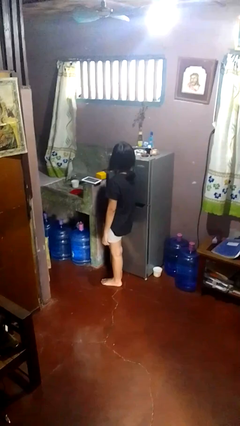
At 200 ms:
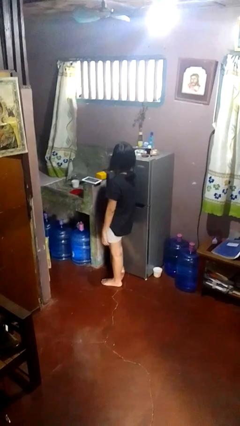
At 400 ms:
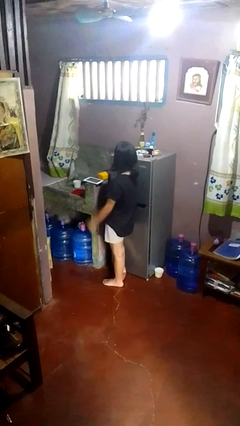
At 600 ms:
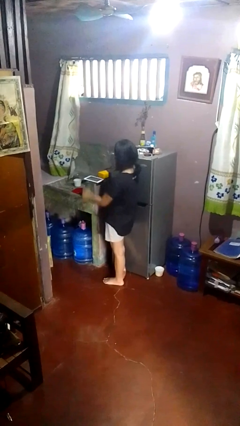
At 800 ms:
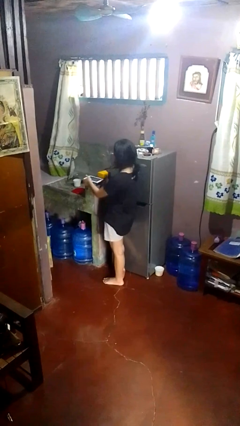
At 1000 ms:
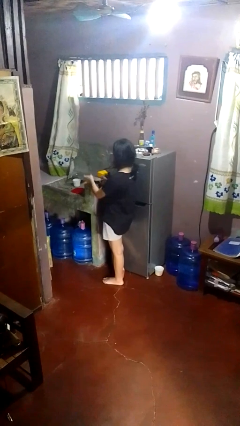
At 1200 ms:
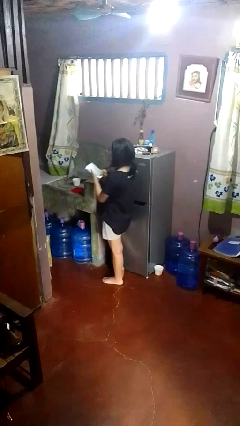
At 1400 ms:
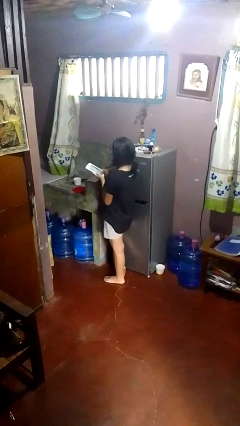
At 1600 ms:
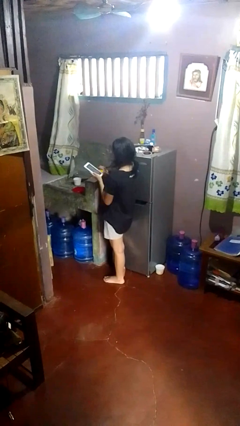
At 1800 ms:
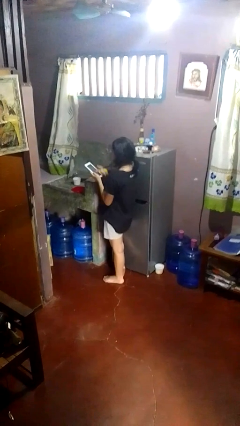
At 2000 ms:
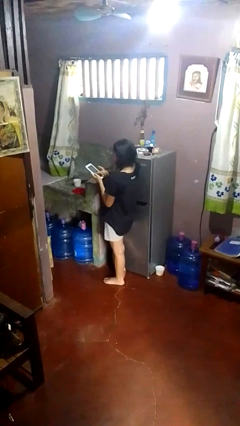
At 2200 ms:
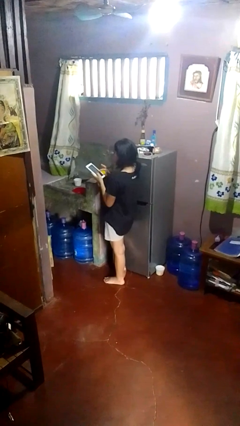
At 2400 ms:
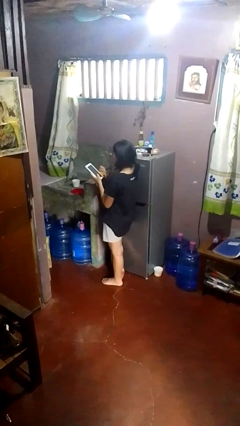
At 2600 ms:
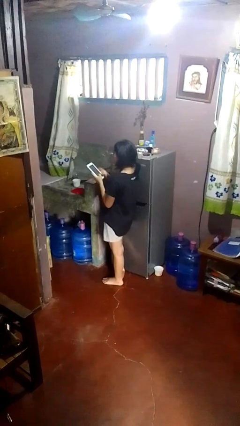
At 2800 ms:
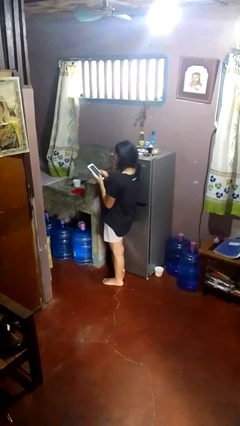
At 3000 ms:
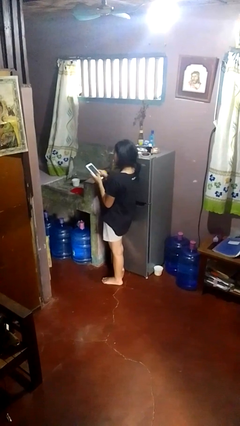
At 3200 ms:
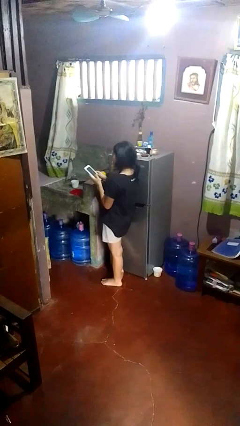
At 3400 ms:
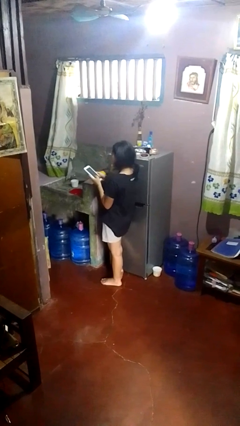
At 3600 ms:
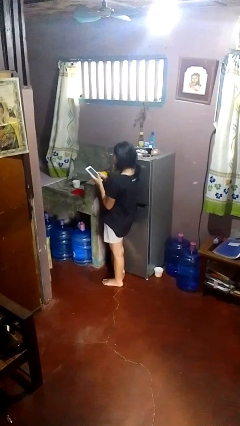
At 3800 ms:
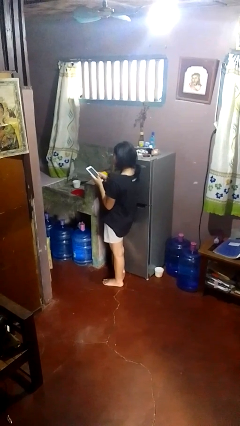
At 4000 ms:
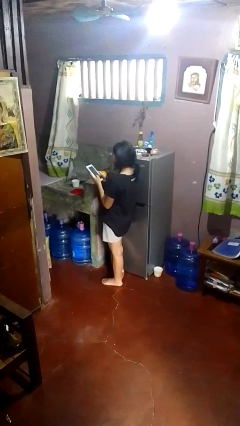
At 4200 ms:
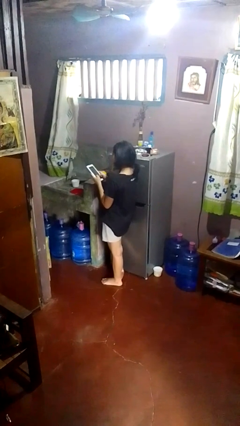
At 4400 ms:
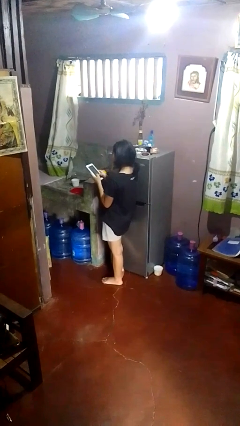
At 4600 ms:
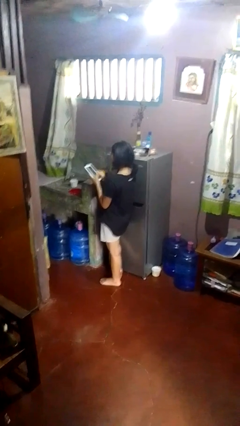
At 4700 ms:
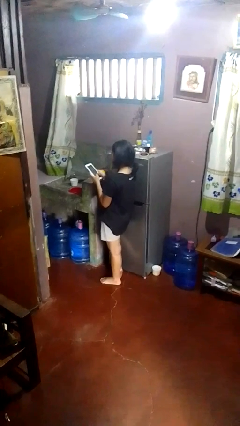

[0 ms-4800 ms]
person interacts with tablet

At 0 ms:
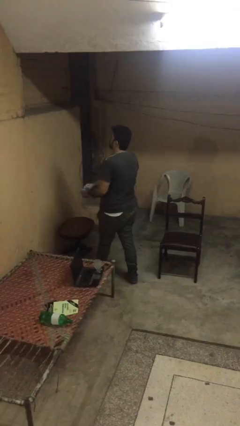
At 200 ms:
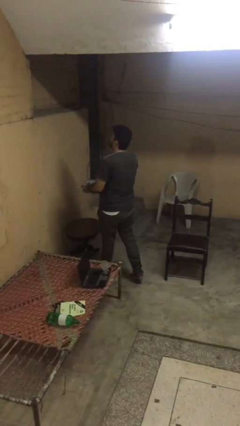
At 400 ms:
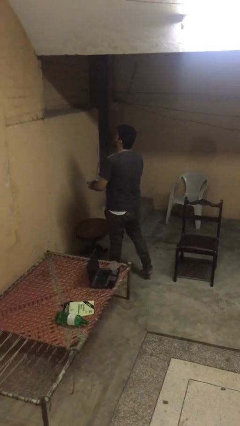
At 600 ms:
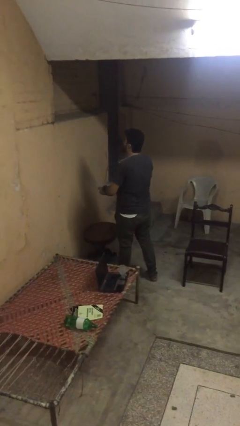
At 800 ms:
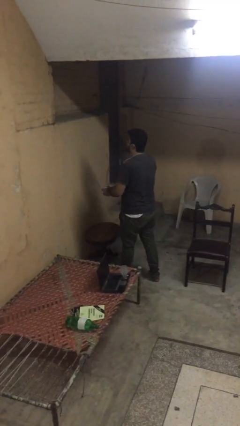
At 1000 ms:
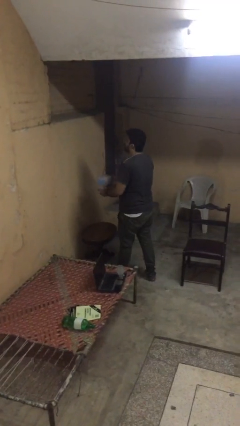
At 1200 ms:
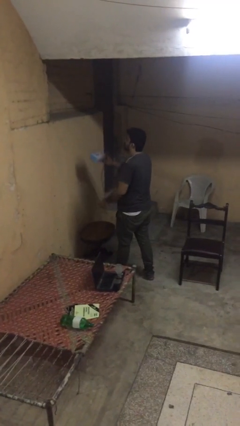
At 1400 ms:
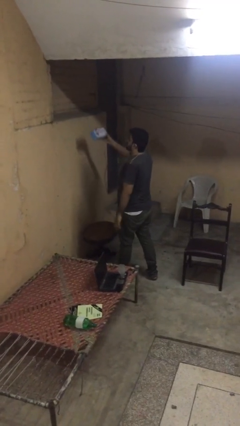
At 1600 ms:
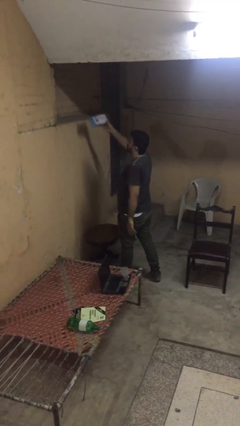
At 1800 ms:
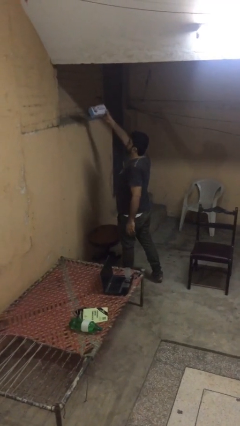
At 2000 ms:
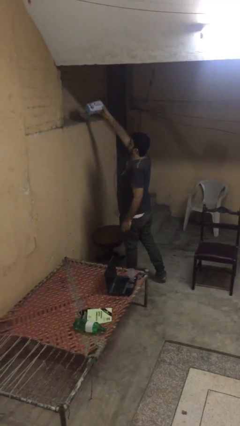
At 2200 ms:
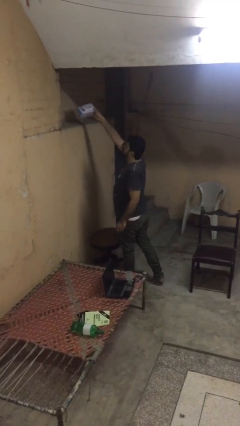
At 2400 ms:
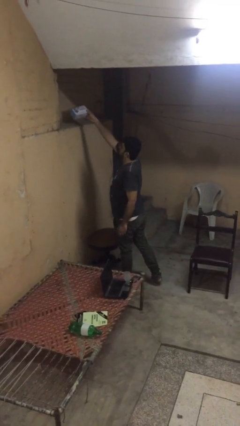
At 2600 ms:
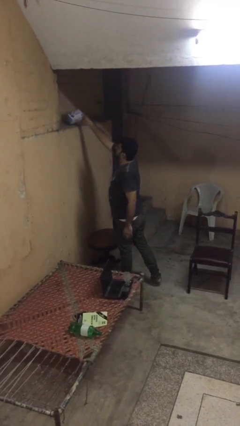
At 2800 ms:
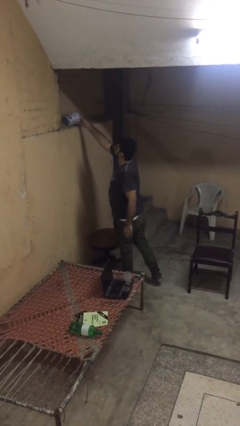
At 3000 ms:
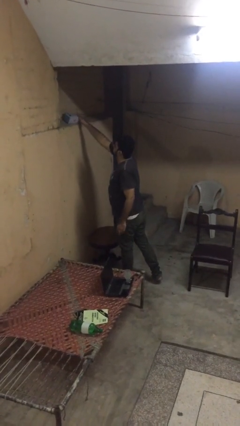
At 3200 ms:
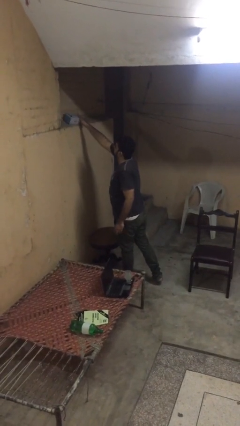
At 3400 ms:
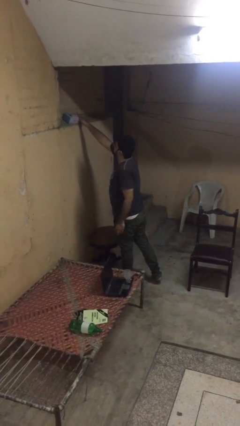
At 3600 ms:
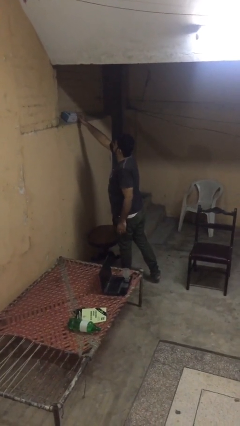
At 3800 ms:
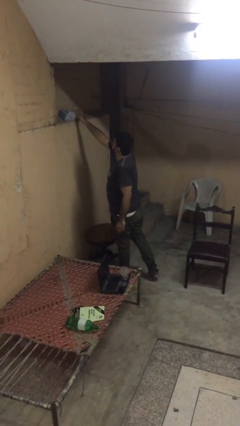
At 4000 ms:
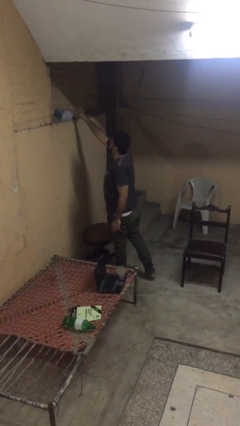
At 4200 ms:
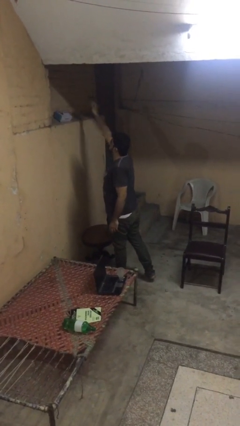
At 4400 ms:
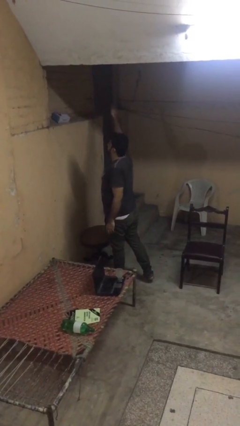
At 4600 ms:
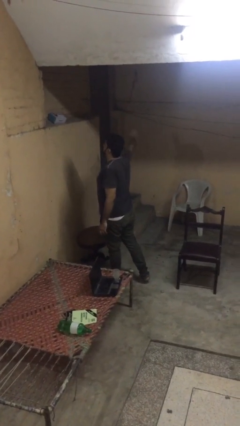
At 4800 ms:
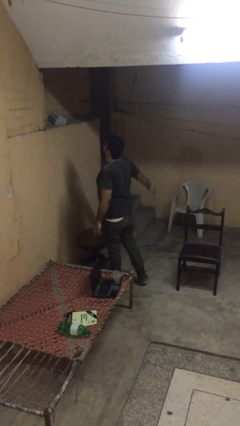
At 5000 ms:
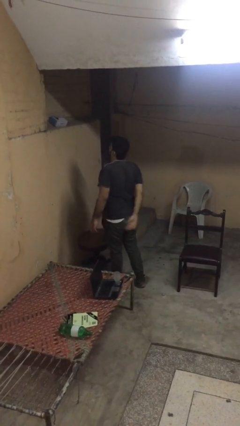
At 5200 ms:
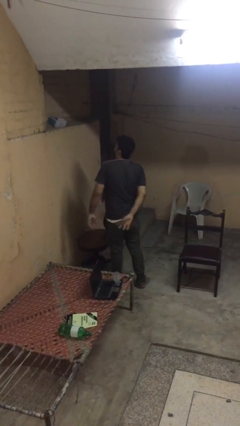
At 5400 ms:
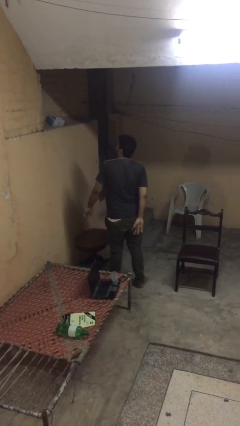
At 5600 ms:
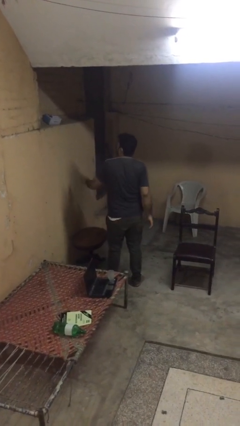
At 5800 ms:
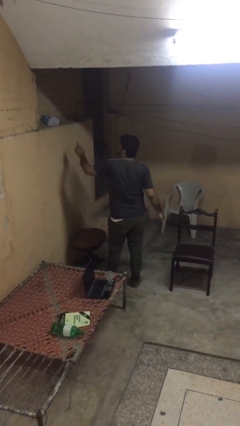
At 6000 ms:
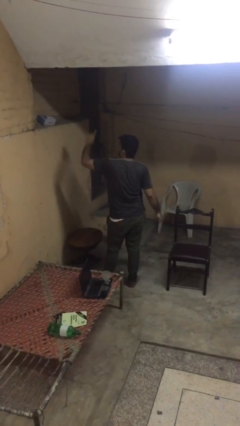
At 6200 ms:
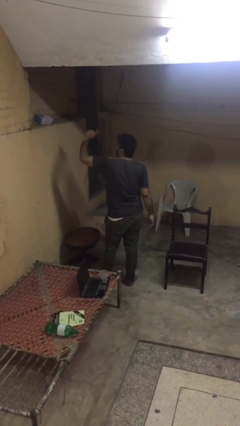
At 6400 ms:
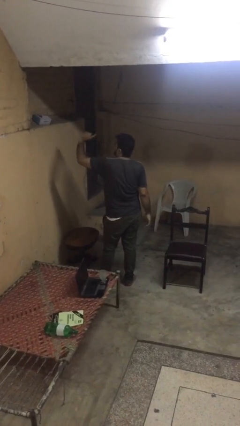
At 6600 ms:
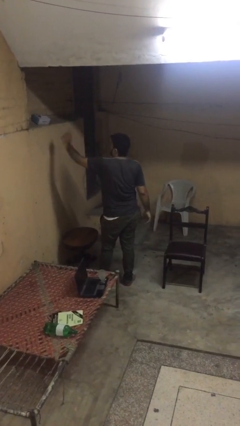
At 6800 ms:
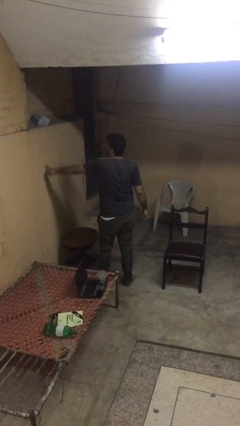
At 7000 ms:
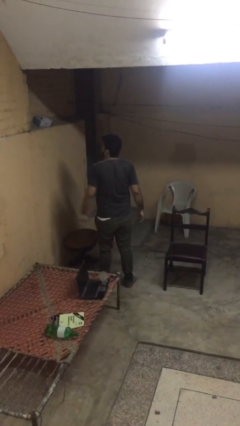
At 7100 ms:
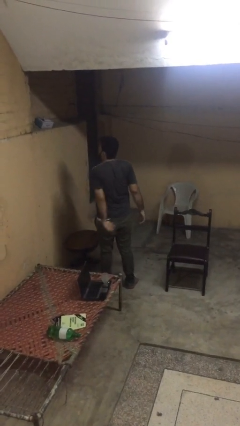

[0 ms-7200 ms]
person puts down object on shelf

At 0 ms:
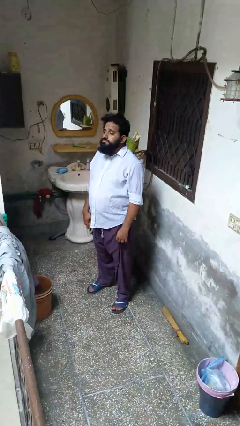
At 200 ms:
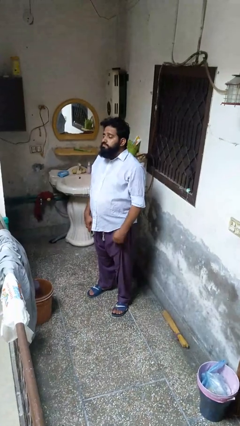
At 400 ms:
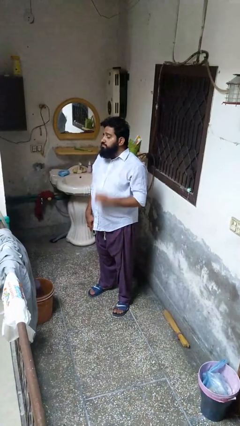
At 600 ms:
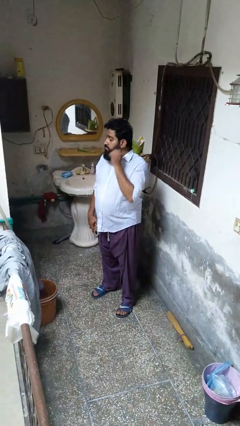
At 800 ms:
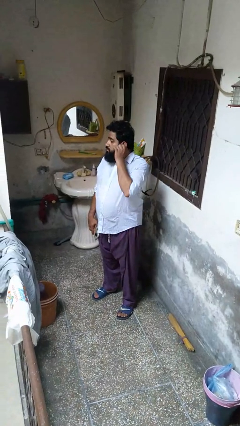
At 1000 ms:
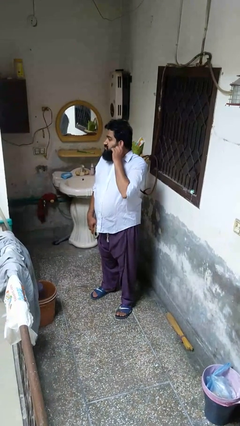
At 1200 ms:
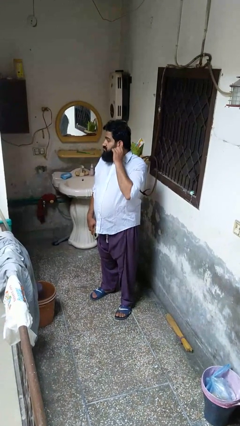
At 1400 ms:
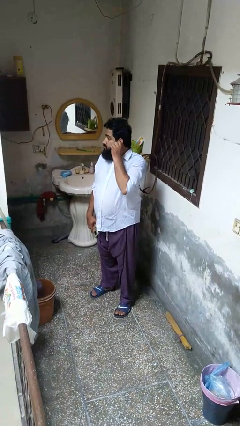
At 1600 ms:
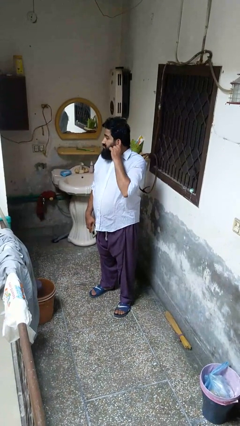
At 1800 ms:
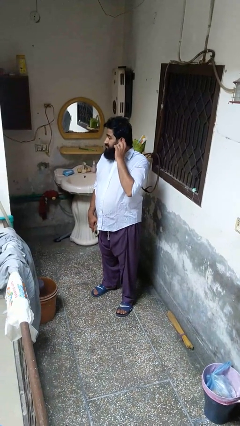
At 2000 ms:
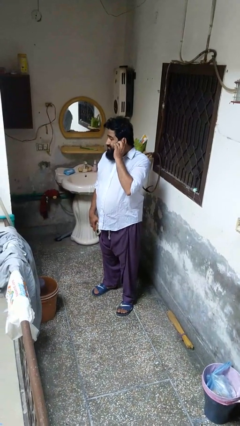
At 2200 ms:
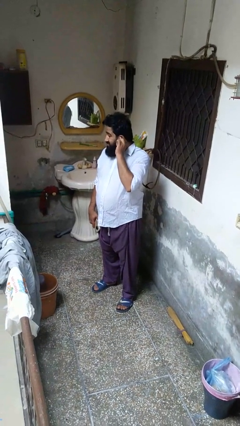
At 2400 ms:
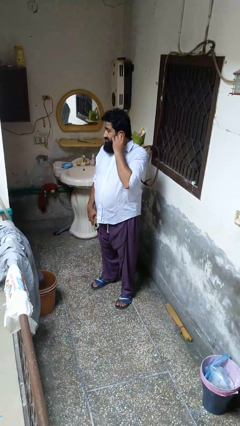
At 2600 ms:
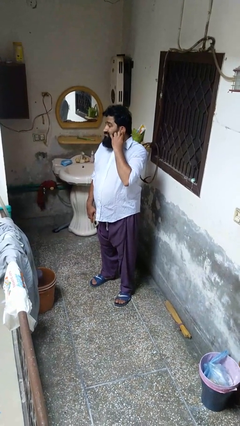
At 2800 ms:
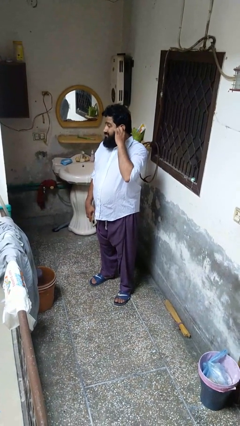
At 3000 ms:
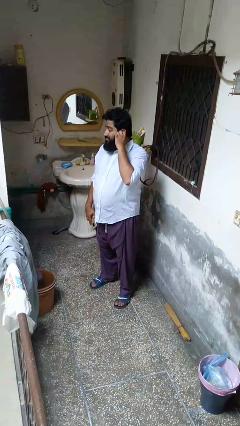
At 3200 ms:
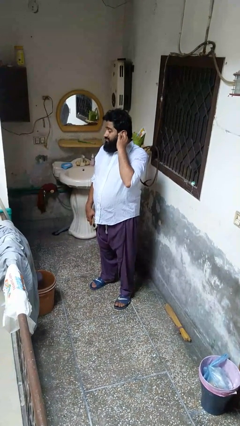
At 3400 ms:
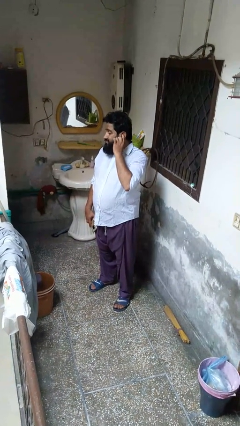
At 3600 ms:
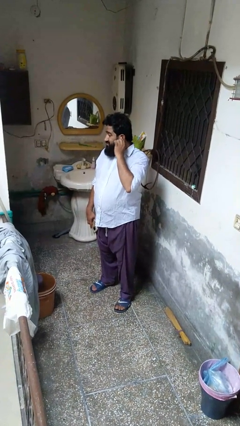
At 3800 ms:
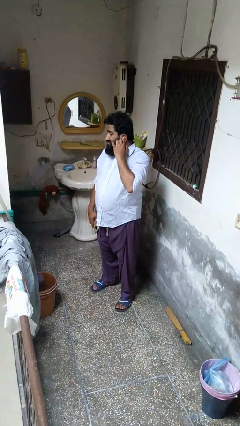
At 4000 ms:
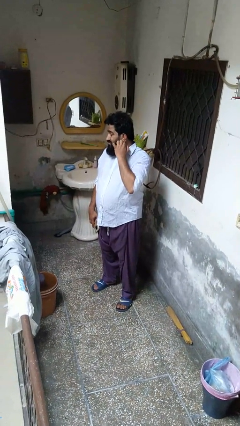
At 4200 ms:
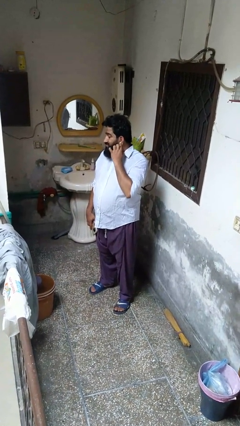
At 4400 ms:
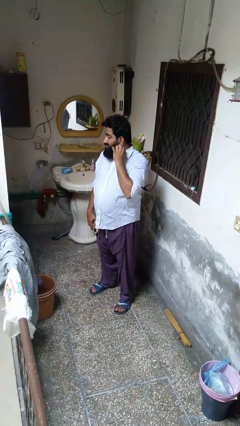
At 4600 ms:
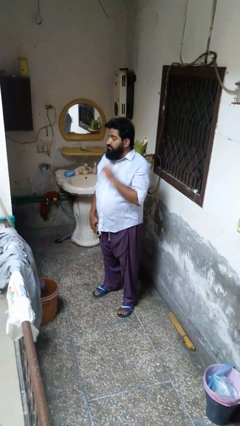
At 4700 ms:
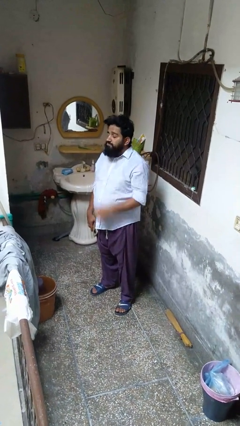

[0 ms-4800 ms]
person touches earlobe

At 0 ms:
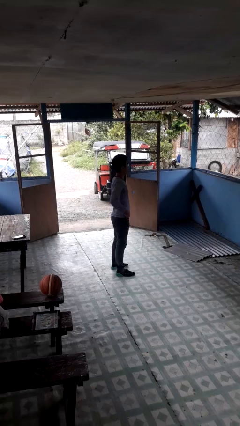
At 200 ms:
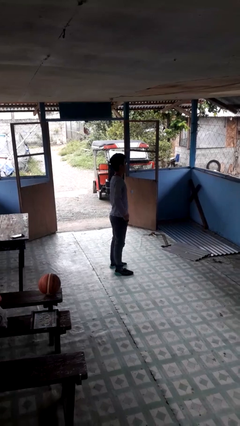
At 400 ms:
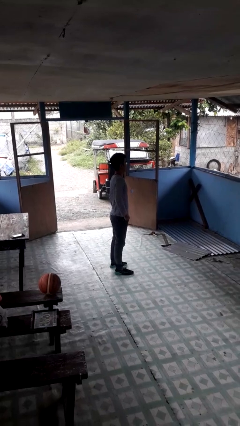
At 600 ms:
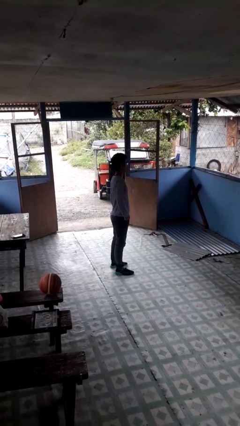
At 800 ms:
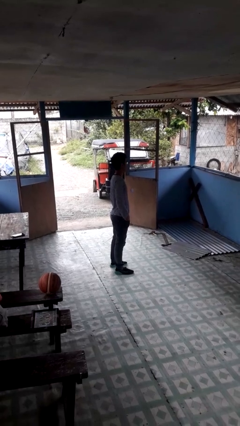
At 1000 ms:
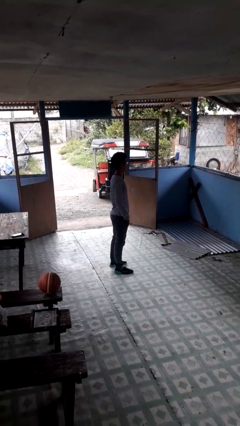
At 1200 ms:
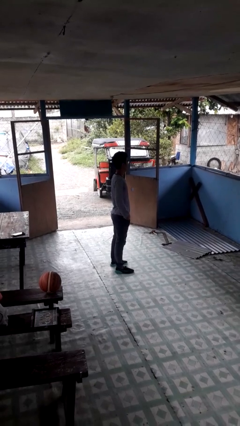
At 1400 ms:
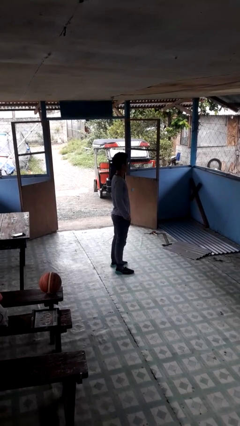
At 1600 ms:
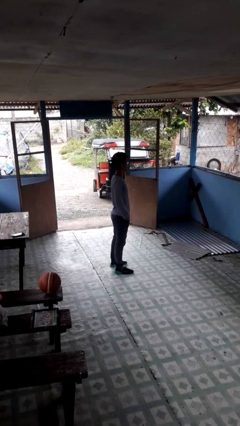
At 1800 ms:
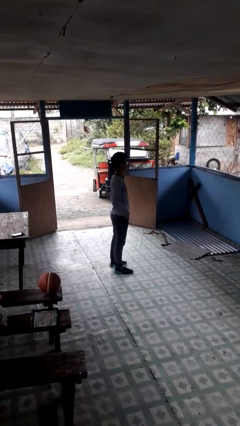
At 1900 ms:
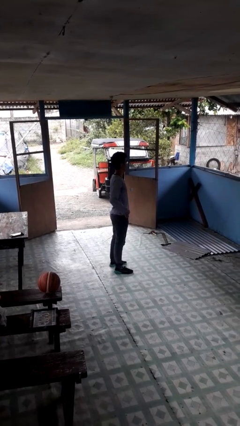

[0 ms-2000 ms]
person puts hands in back pockets
